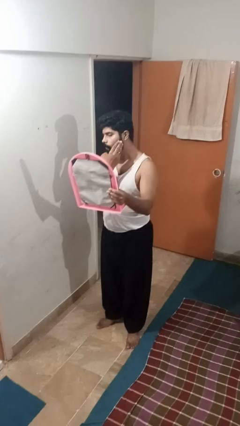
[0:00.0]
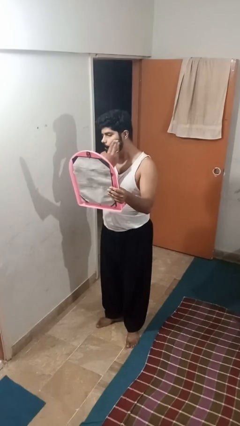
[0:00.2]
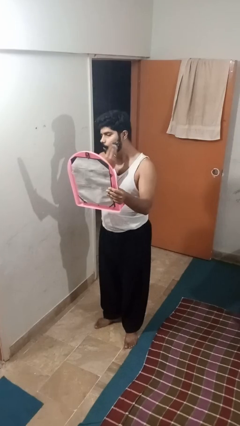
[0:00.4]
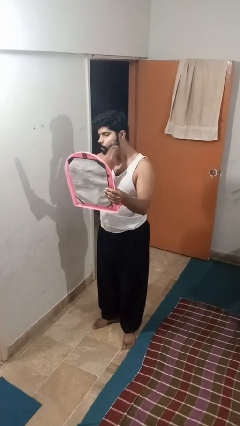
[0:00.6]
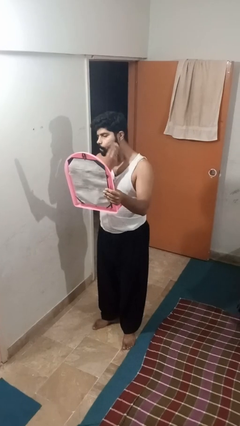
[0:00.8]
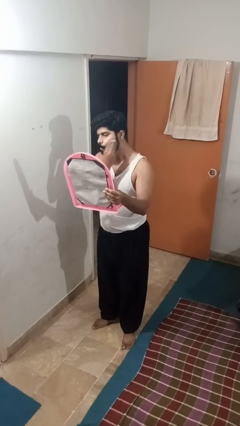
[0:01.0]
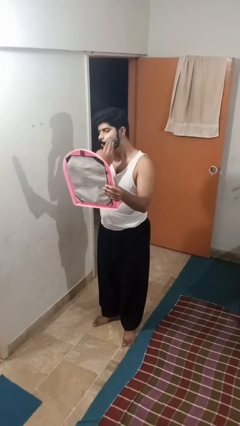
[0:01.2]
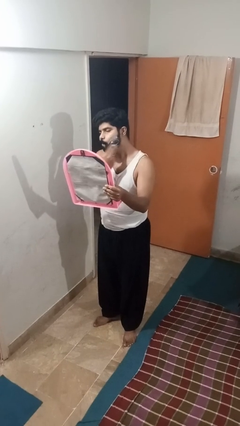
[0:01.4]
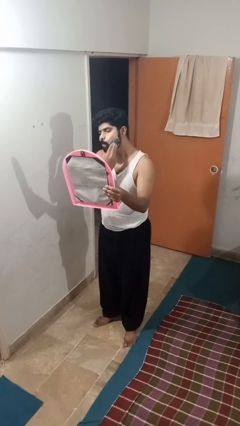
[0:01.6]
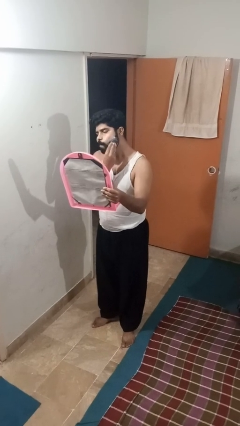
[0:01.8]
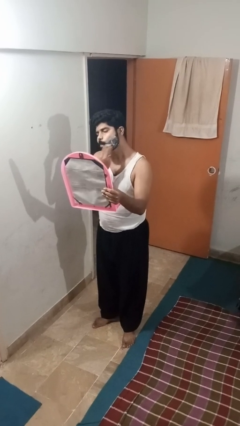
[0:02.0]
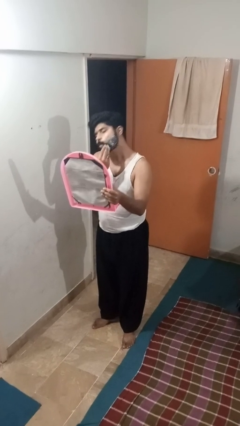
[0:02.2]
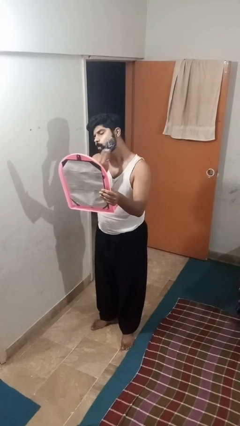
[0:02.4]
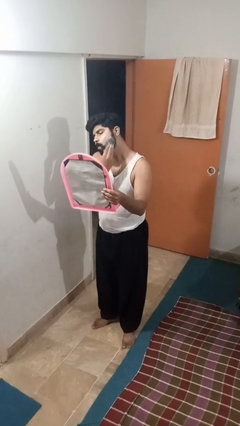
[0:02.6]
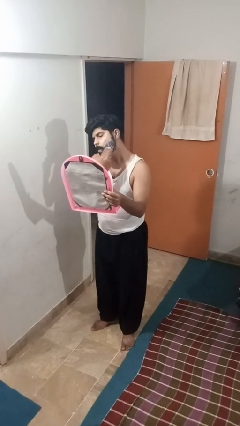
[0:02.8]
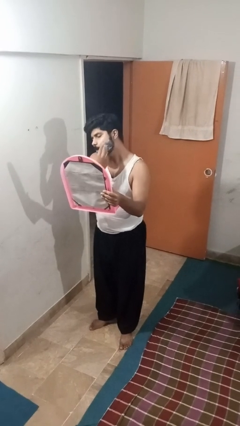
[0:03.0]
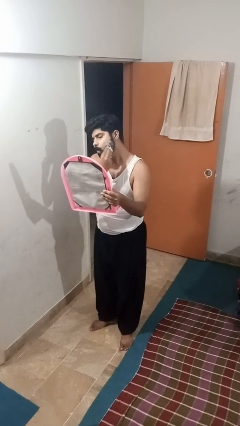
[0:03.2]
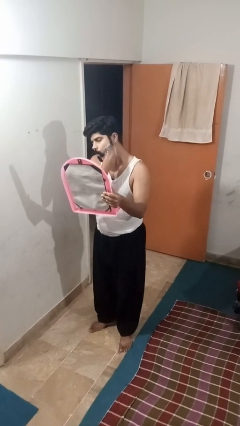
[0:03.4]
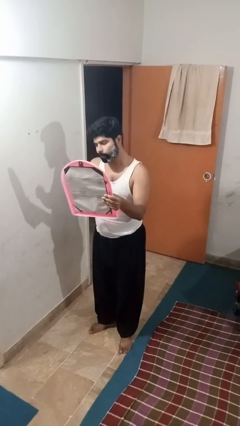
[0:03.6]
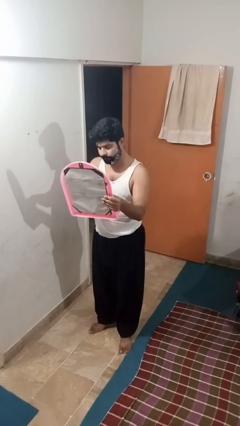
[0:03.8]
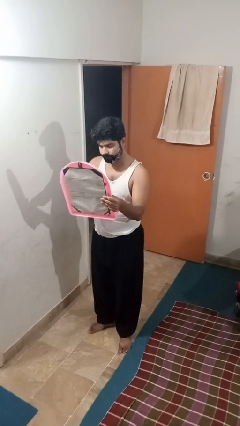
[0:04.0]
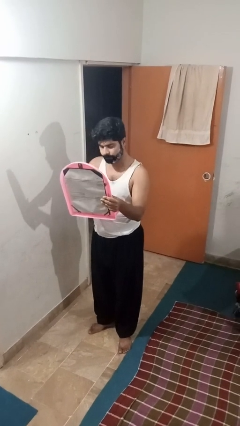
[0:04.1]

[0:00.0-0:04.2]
person applies shaving cream

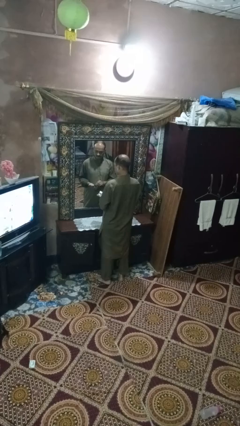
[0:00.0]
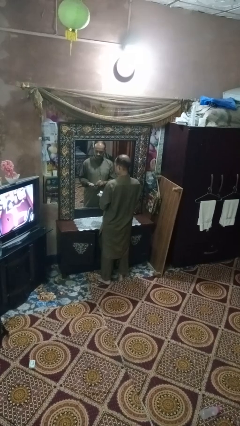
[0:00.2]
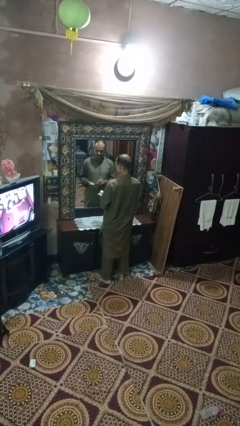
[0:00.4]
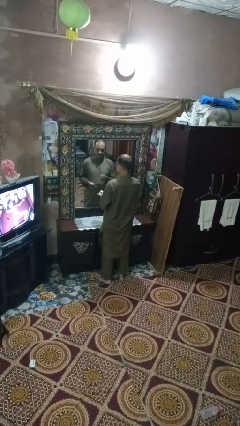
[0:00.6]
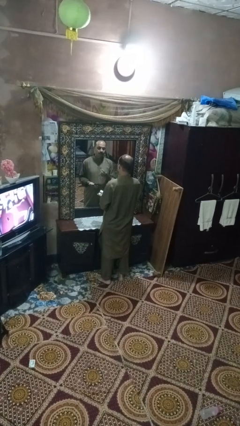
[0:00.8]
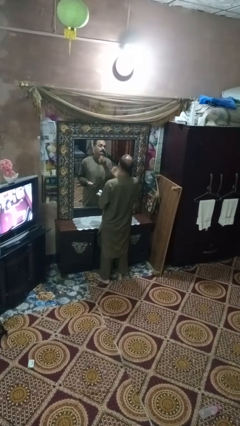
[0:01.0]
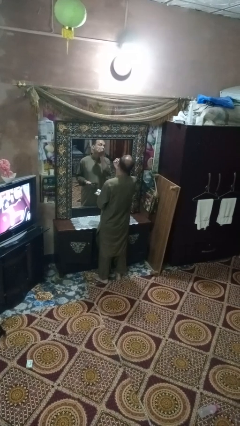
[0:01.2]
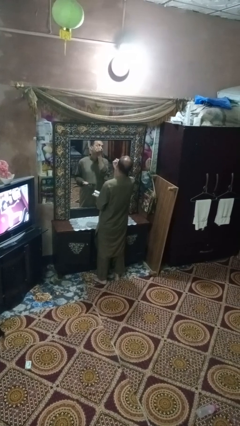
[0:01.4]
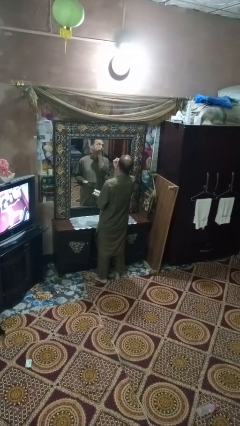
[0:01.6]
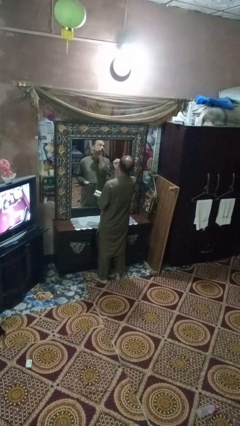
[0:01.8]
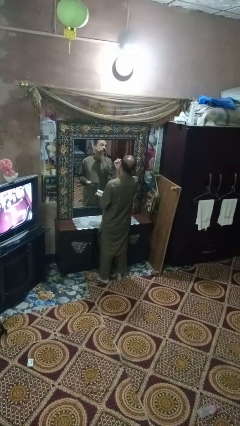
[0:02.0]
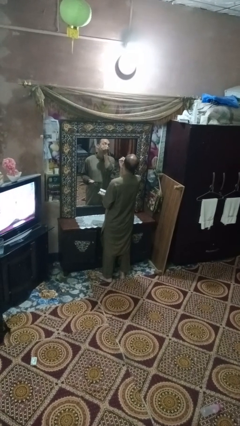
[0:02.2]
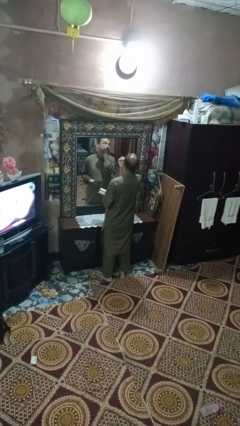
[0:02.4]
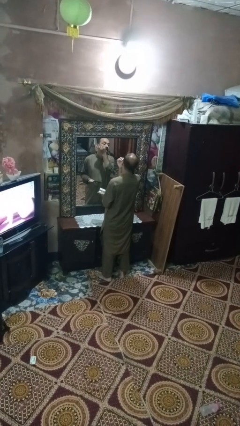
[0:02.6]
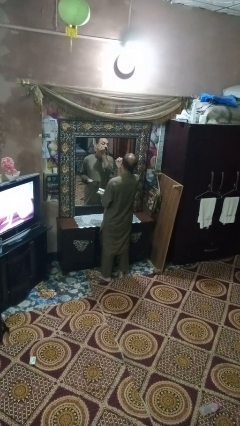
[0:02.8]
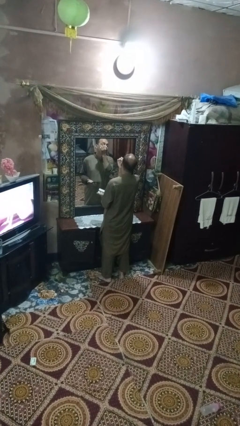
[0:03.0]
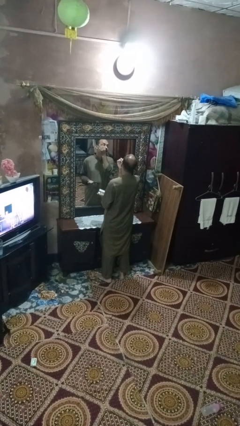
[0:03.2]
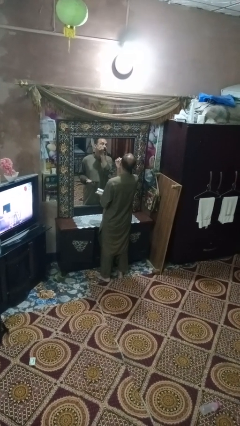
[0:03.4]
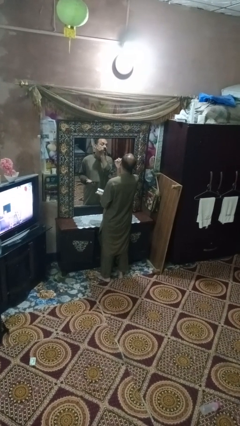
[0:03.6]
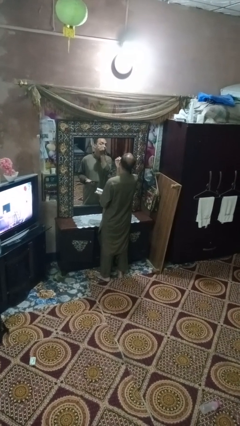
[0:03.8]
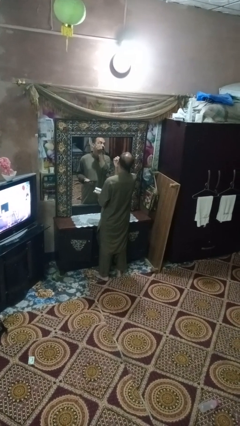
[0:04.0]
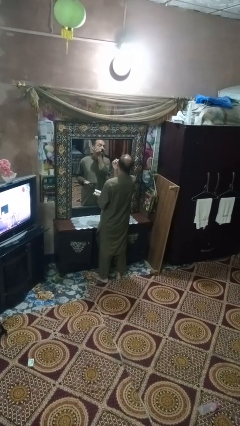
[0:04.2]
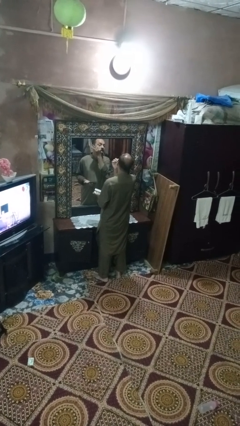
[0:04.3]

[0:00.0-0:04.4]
person applies eye makeup

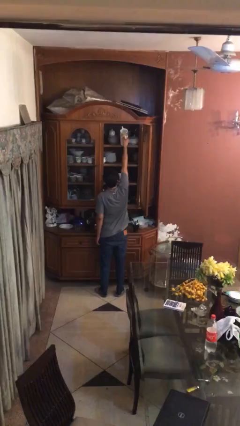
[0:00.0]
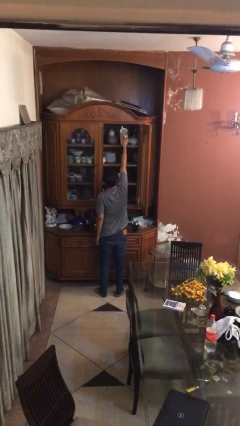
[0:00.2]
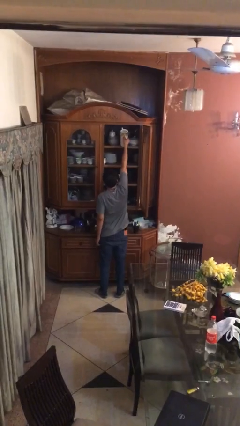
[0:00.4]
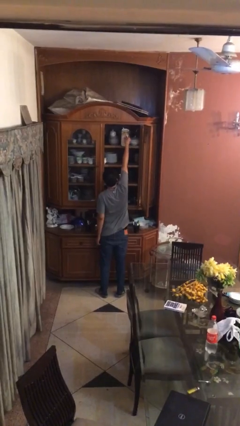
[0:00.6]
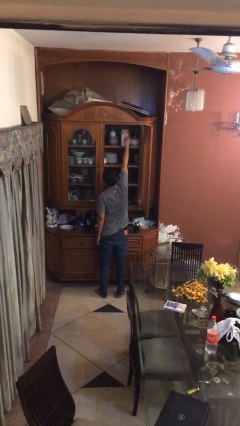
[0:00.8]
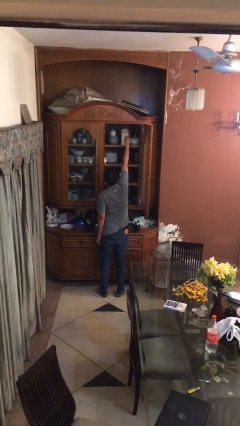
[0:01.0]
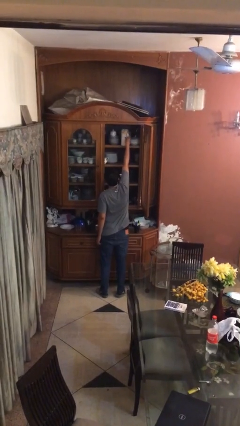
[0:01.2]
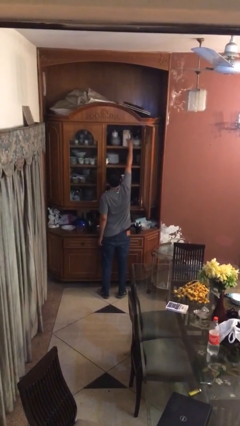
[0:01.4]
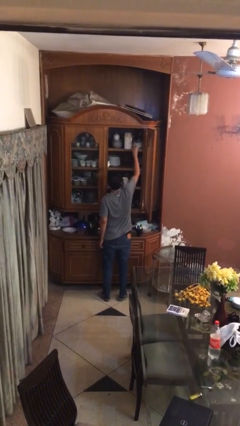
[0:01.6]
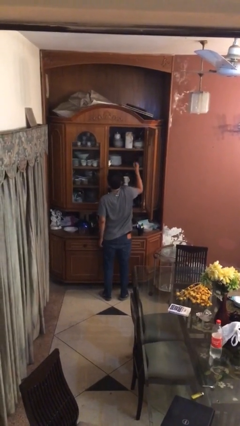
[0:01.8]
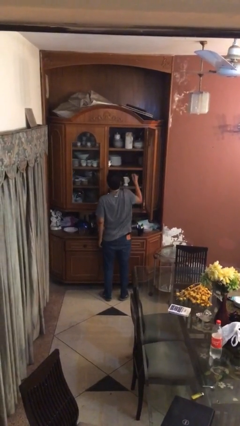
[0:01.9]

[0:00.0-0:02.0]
person puts down object on shelf

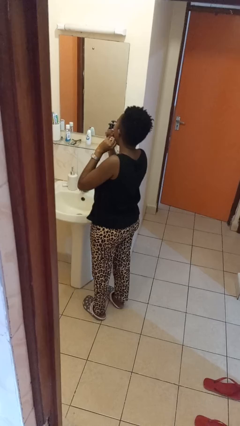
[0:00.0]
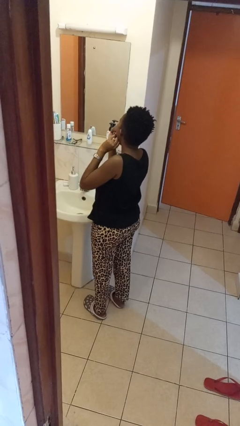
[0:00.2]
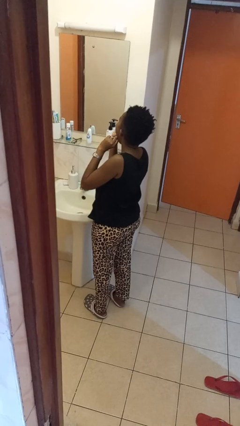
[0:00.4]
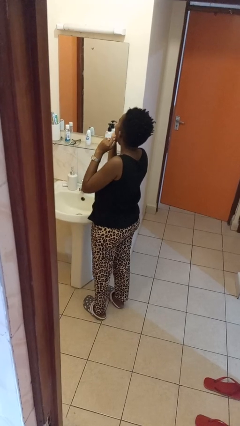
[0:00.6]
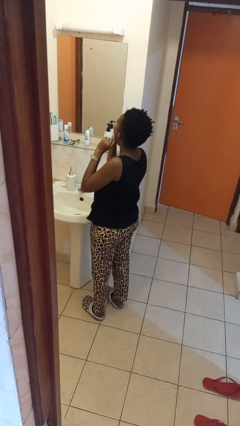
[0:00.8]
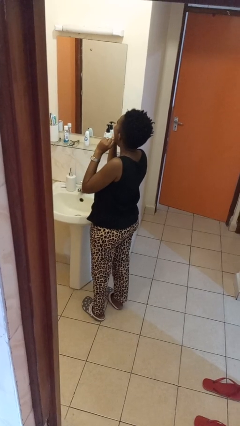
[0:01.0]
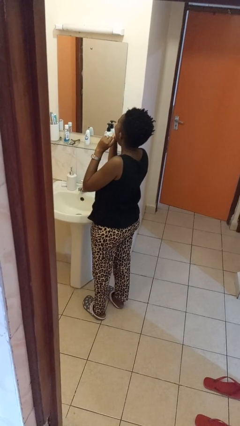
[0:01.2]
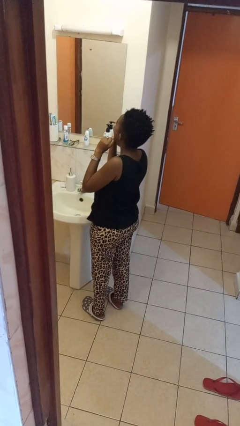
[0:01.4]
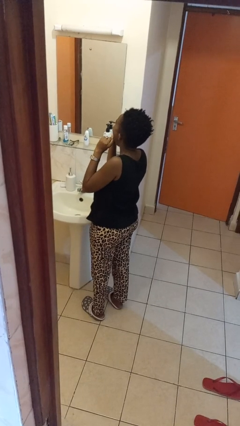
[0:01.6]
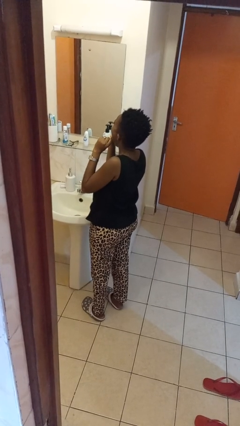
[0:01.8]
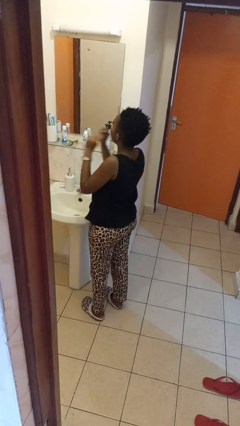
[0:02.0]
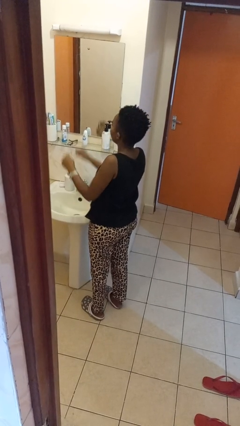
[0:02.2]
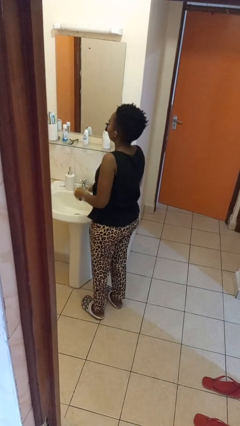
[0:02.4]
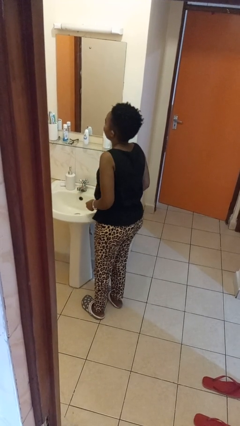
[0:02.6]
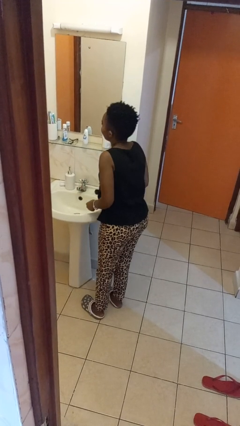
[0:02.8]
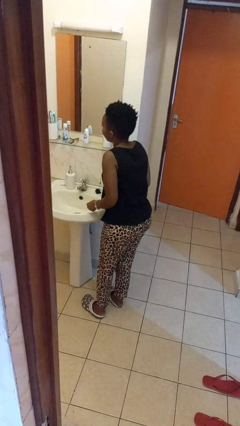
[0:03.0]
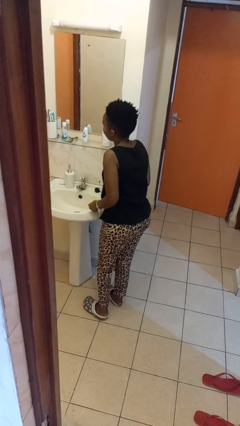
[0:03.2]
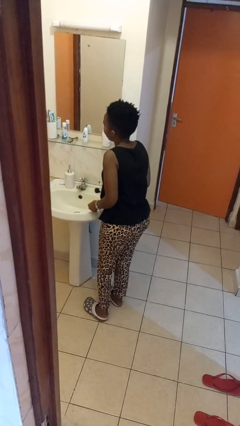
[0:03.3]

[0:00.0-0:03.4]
person flosses

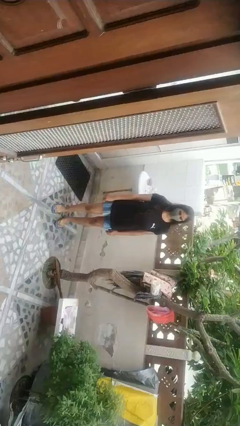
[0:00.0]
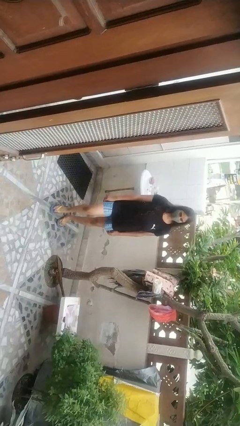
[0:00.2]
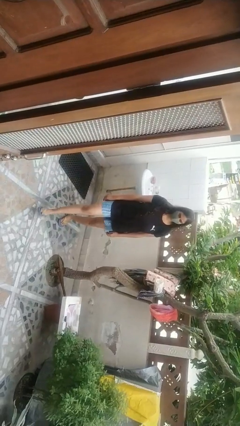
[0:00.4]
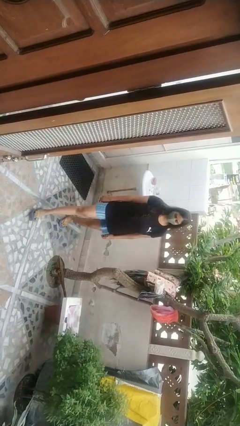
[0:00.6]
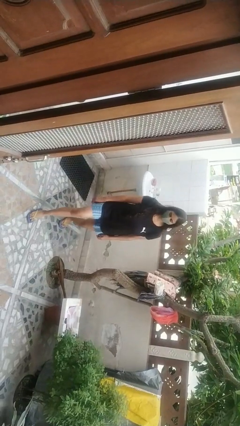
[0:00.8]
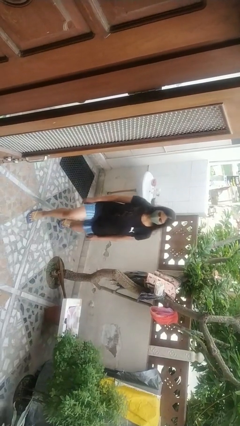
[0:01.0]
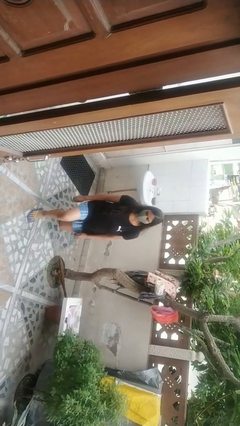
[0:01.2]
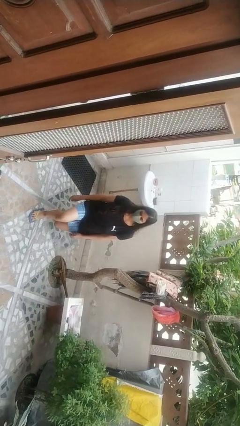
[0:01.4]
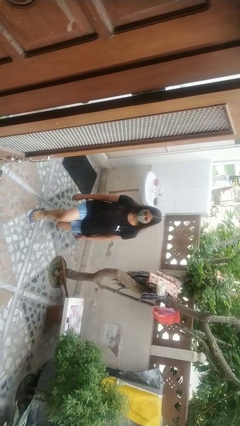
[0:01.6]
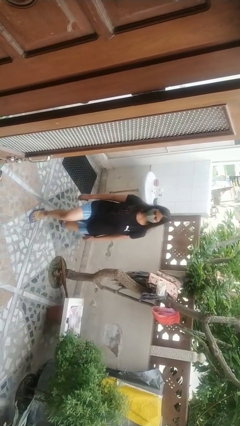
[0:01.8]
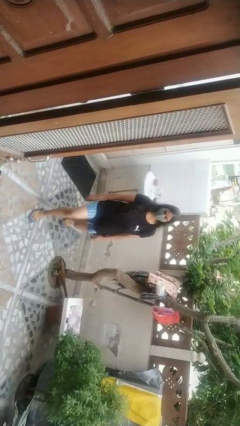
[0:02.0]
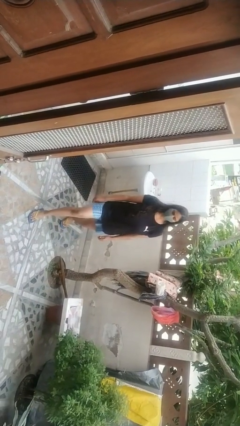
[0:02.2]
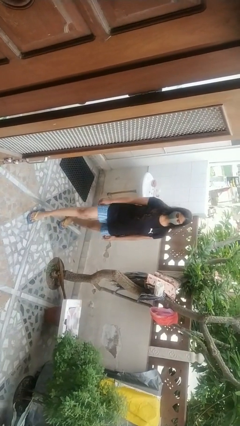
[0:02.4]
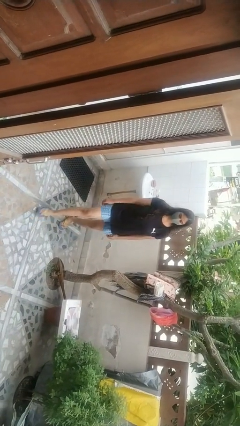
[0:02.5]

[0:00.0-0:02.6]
person exercises with lunges

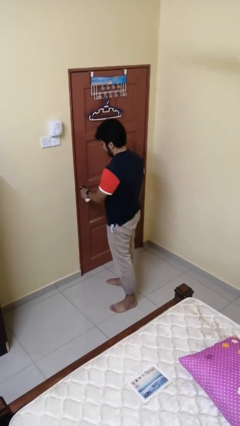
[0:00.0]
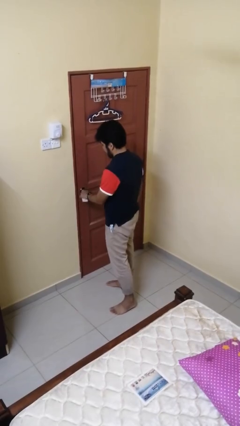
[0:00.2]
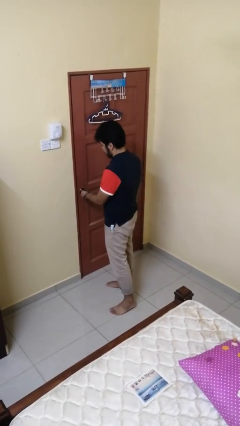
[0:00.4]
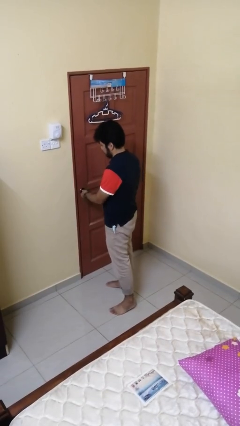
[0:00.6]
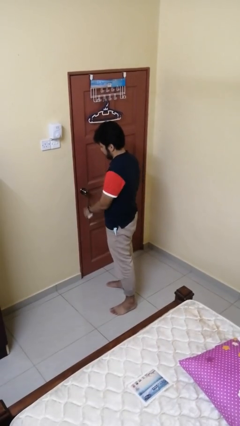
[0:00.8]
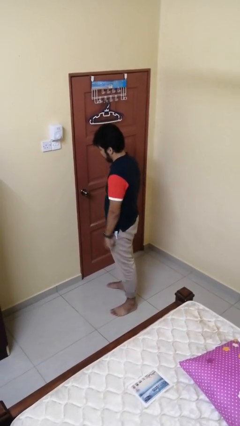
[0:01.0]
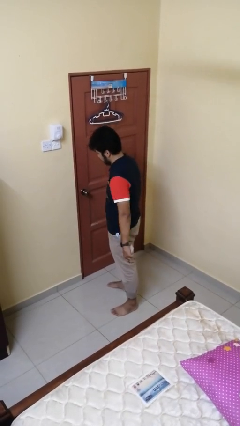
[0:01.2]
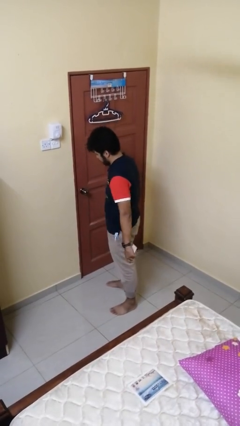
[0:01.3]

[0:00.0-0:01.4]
person unlocks door with keys
